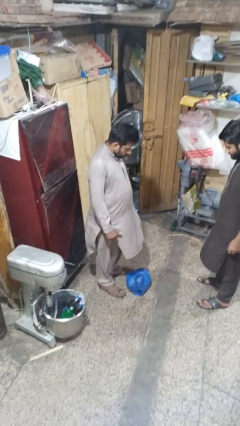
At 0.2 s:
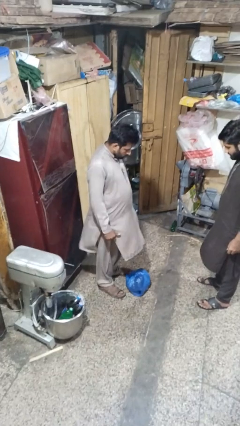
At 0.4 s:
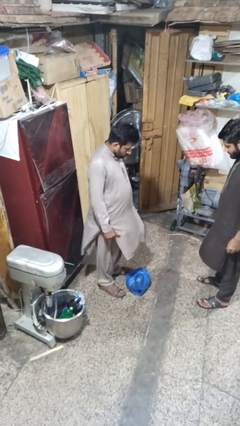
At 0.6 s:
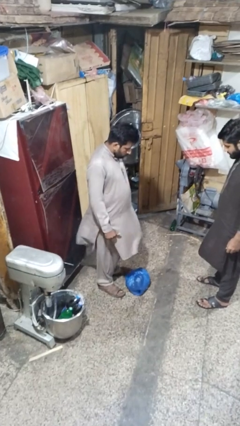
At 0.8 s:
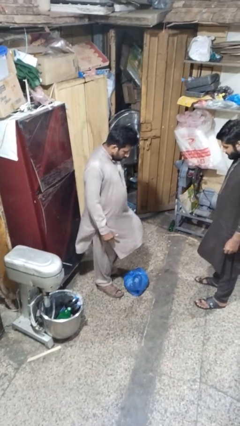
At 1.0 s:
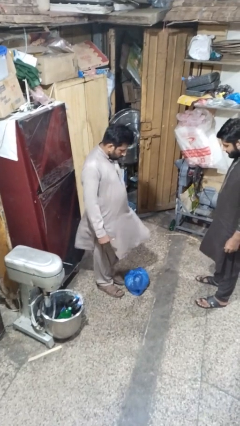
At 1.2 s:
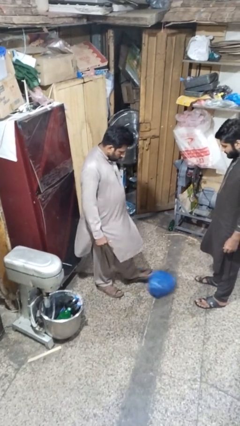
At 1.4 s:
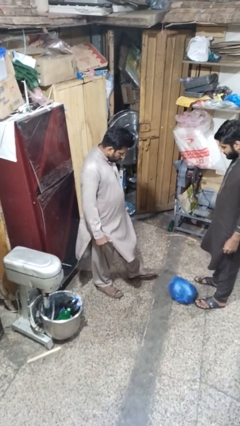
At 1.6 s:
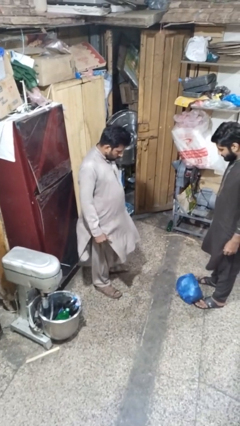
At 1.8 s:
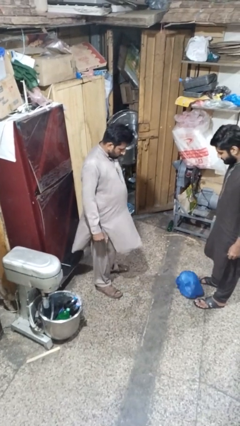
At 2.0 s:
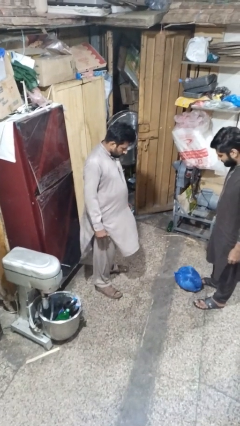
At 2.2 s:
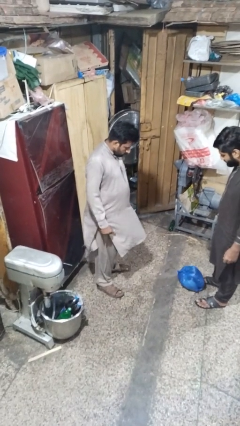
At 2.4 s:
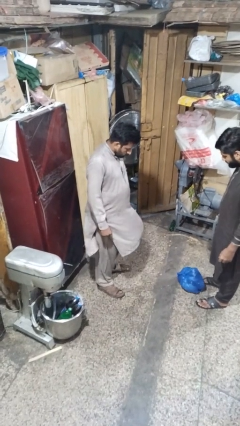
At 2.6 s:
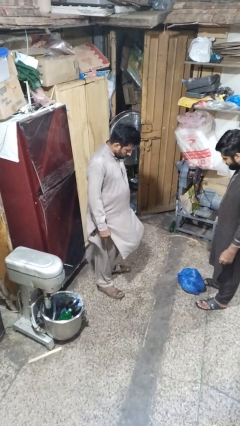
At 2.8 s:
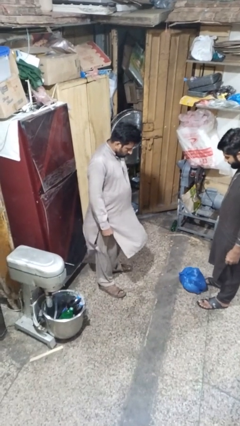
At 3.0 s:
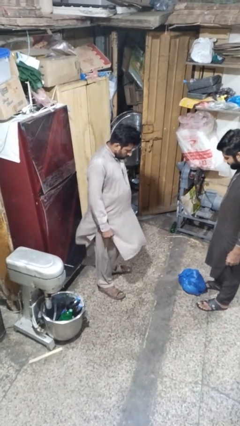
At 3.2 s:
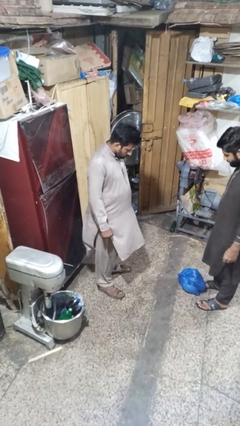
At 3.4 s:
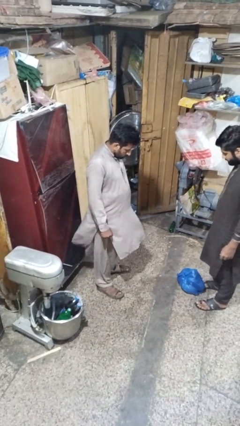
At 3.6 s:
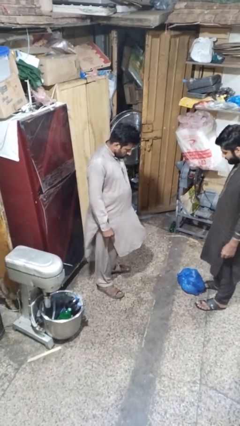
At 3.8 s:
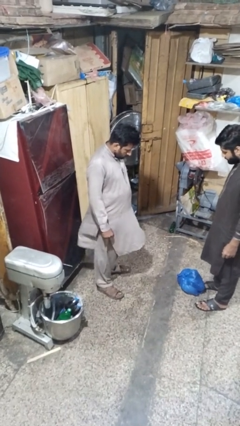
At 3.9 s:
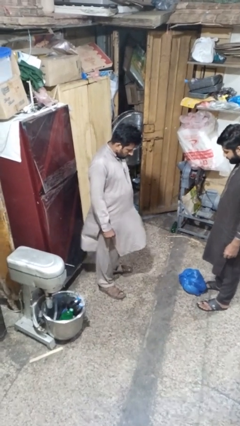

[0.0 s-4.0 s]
person kicks object to person

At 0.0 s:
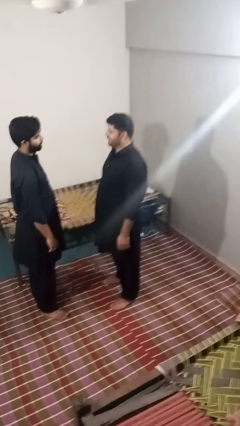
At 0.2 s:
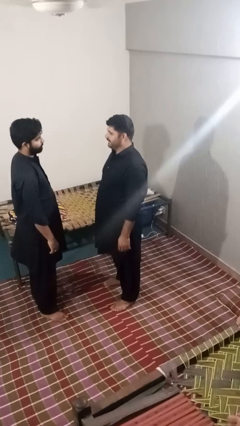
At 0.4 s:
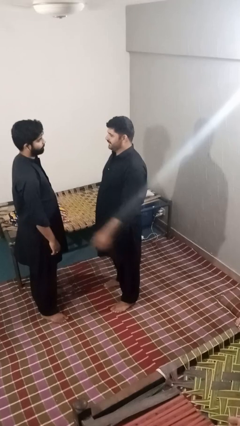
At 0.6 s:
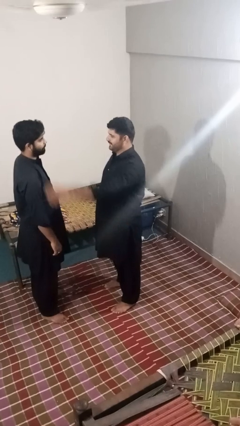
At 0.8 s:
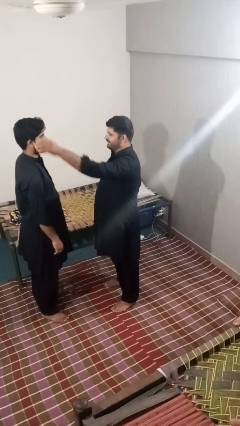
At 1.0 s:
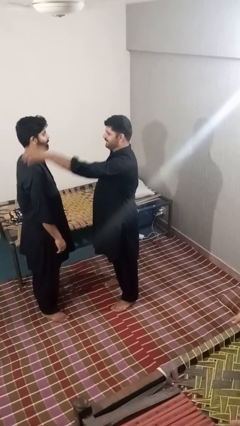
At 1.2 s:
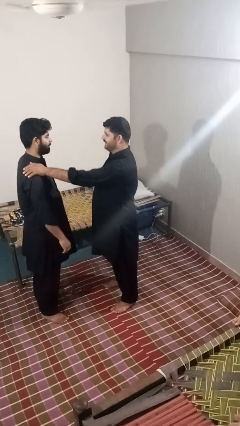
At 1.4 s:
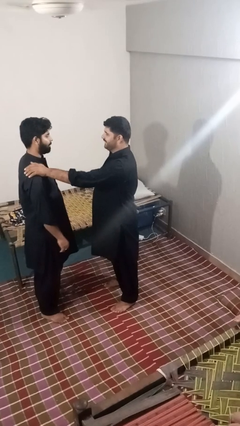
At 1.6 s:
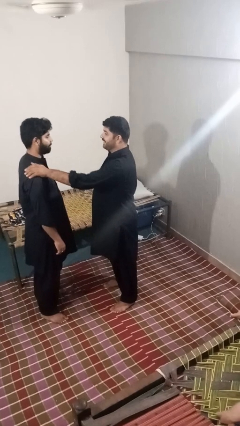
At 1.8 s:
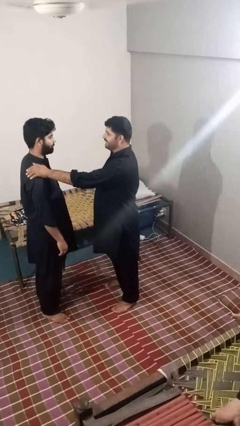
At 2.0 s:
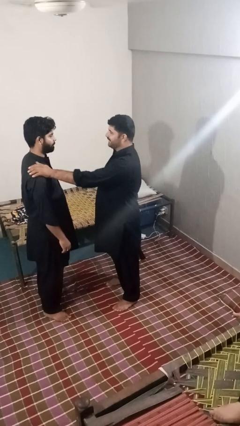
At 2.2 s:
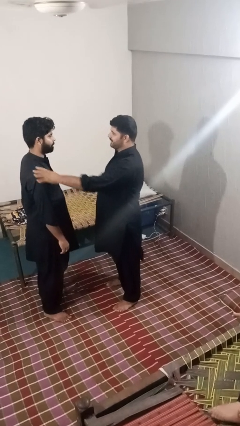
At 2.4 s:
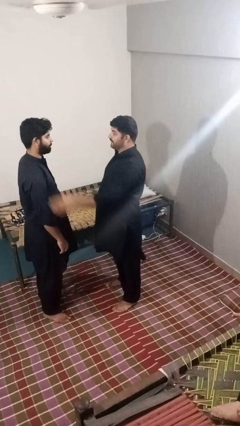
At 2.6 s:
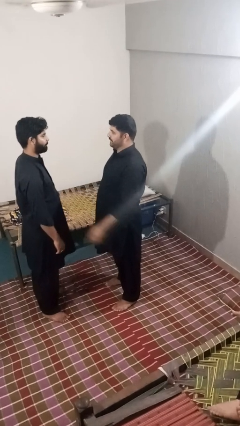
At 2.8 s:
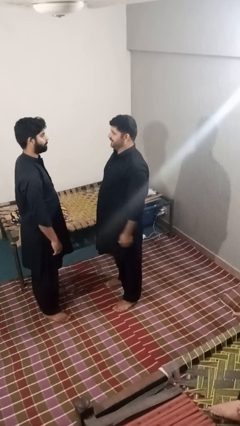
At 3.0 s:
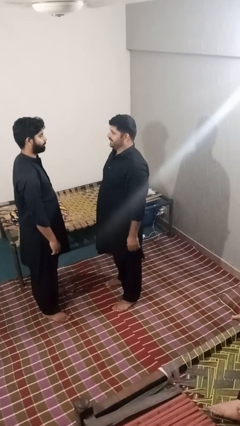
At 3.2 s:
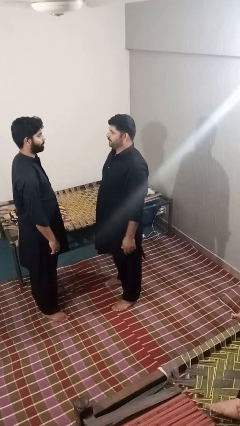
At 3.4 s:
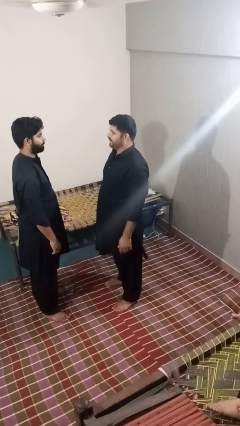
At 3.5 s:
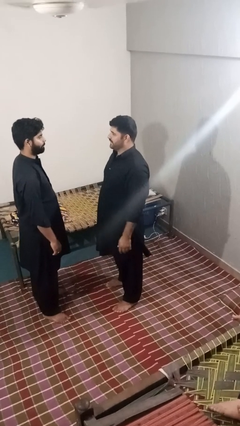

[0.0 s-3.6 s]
person pounds shoulders of person

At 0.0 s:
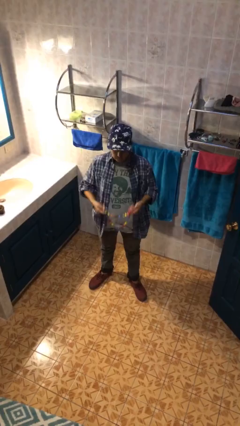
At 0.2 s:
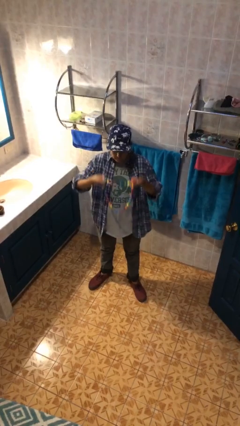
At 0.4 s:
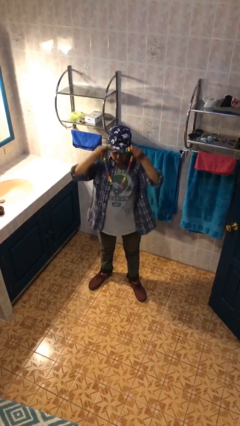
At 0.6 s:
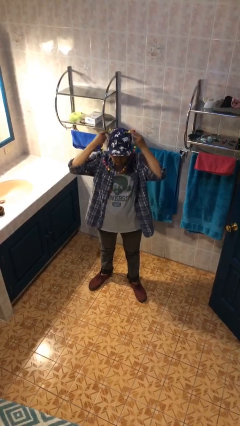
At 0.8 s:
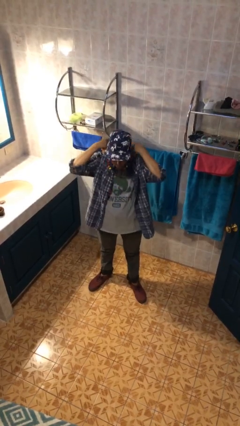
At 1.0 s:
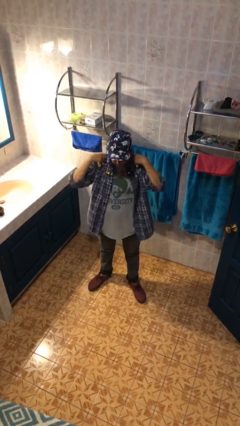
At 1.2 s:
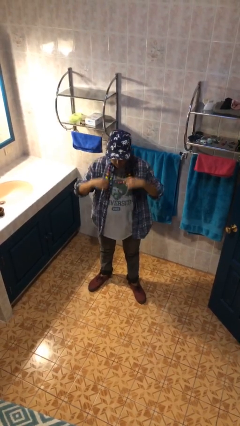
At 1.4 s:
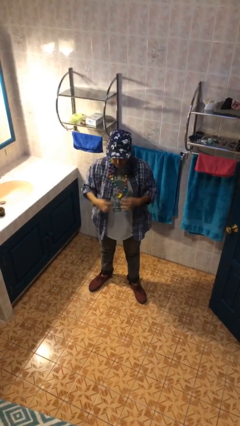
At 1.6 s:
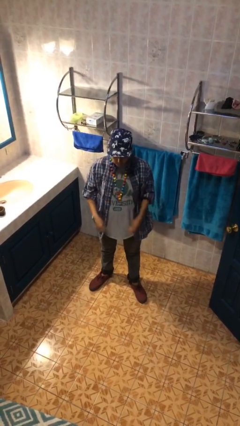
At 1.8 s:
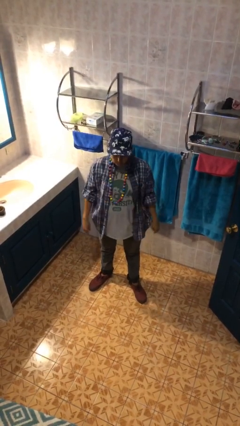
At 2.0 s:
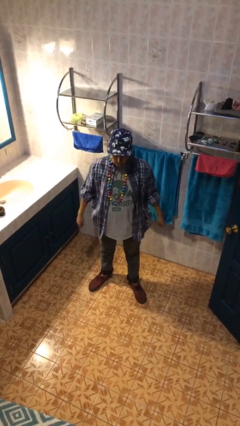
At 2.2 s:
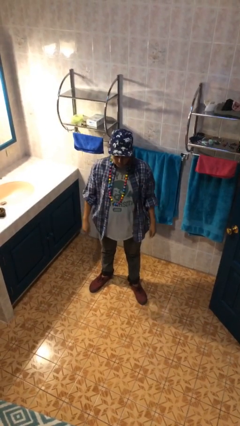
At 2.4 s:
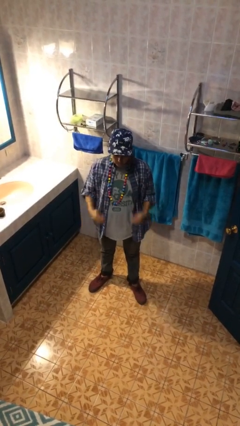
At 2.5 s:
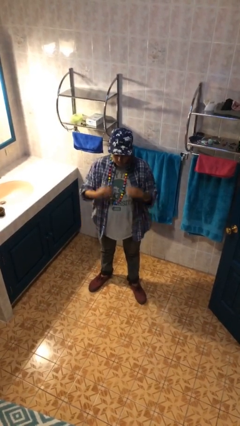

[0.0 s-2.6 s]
person puts on necklace

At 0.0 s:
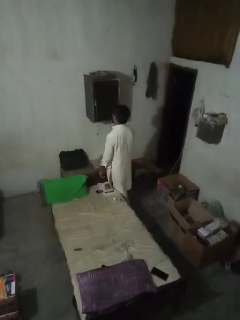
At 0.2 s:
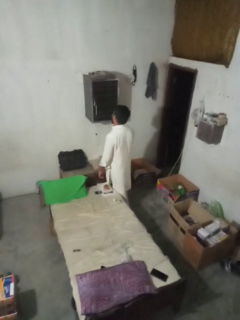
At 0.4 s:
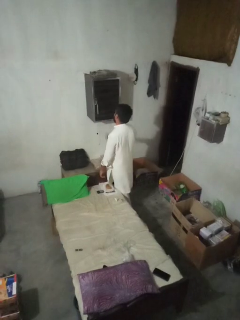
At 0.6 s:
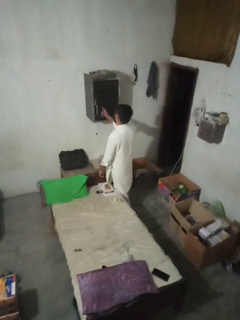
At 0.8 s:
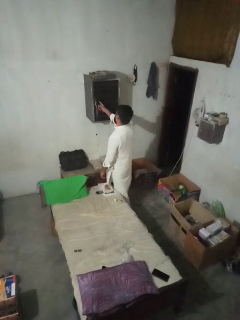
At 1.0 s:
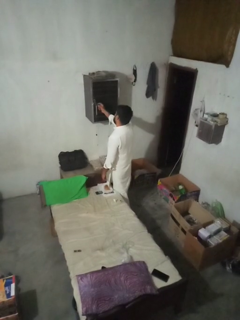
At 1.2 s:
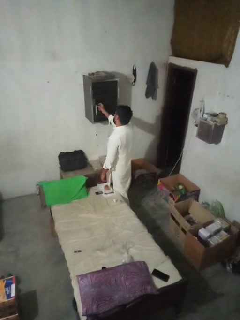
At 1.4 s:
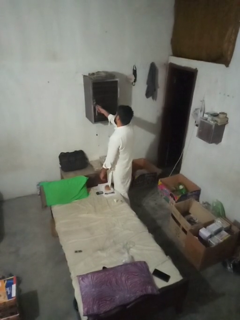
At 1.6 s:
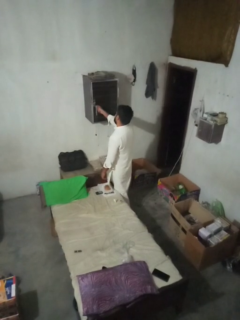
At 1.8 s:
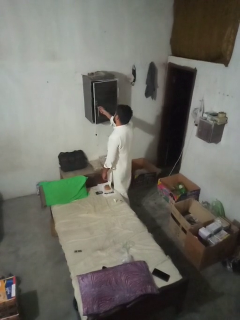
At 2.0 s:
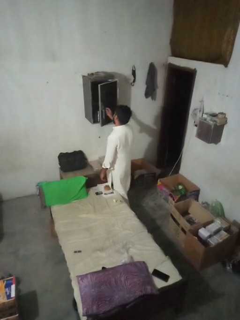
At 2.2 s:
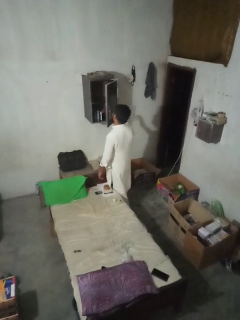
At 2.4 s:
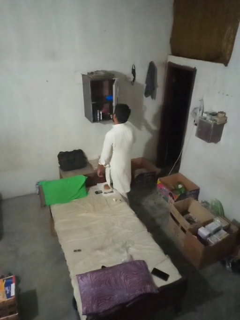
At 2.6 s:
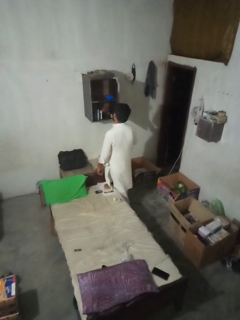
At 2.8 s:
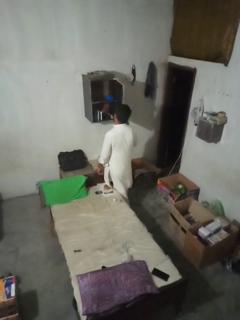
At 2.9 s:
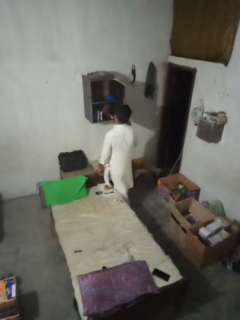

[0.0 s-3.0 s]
person opens dresser drawer

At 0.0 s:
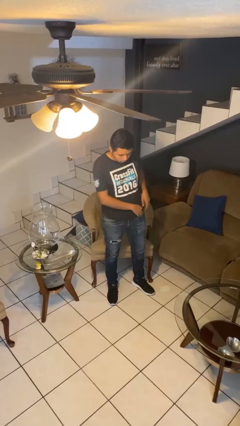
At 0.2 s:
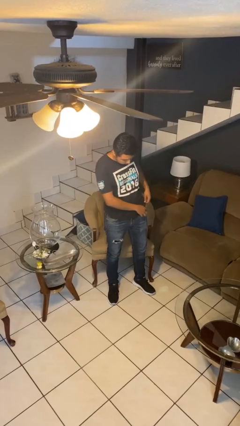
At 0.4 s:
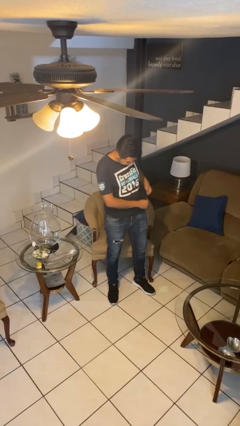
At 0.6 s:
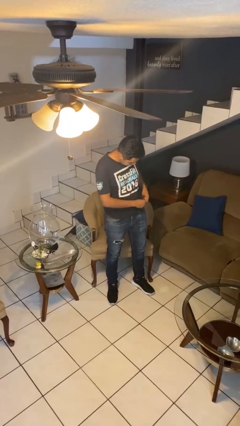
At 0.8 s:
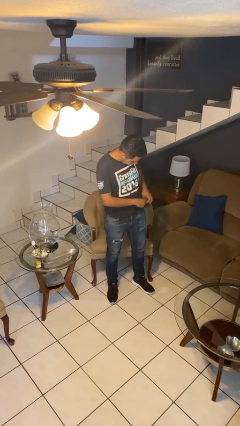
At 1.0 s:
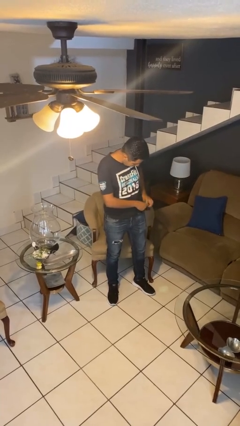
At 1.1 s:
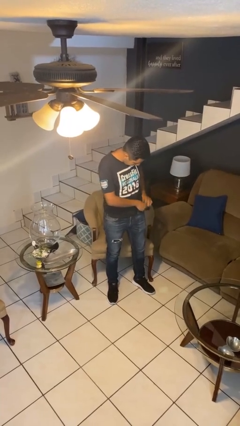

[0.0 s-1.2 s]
person tucks in shirt

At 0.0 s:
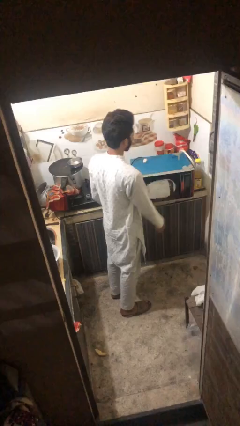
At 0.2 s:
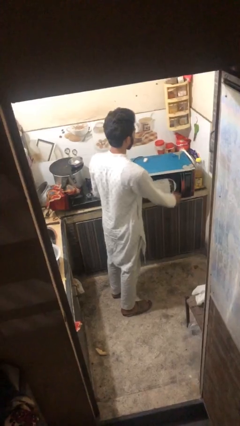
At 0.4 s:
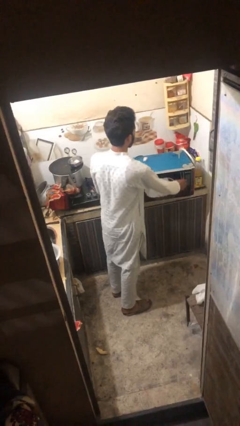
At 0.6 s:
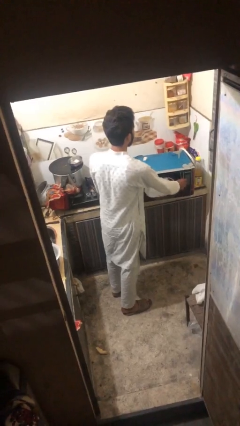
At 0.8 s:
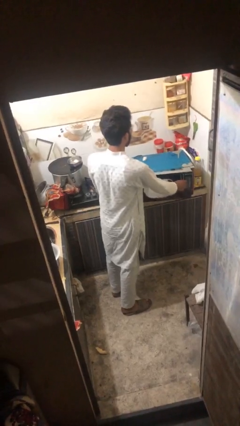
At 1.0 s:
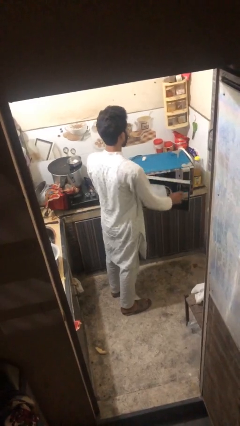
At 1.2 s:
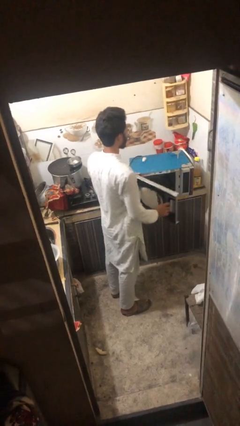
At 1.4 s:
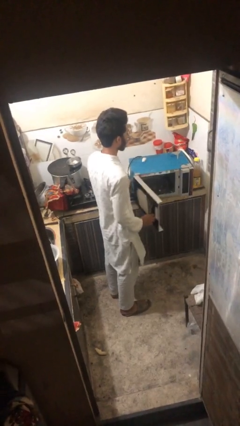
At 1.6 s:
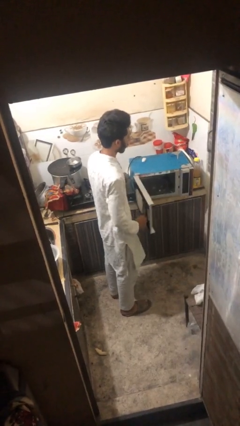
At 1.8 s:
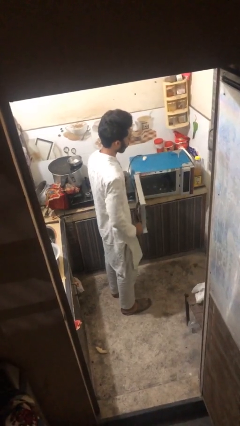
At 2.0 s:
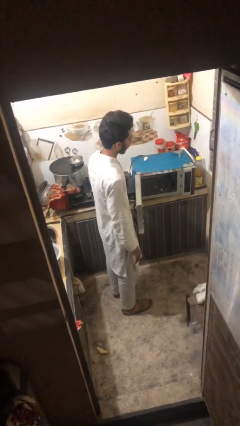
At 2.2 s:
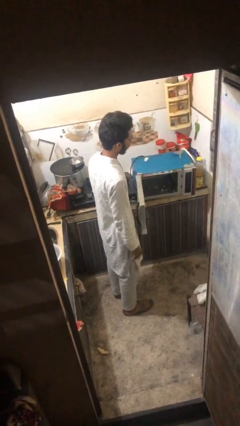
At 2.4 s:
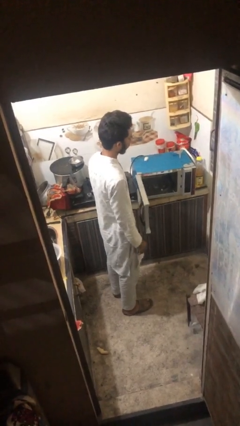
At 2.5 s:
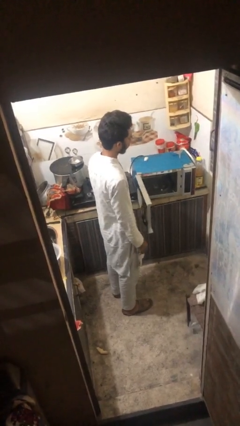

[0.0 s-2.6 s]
person opens oven door

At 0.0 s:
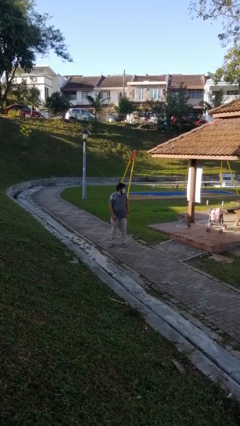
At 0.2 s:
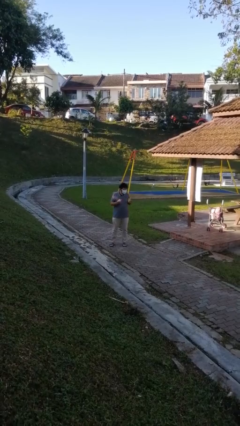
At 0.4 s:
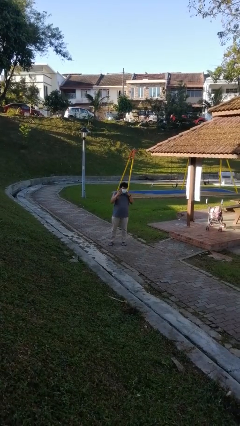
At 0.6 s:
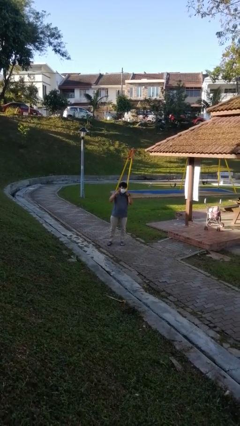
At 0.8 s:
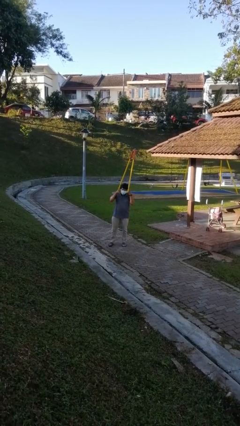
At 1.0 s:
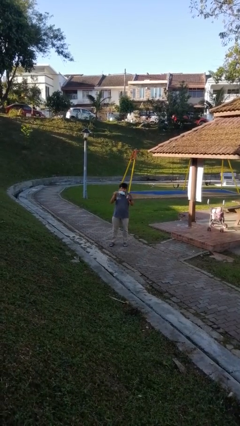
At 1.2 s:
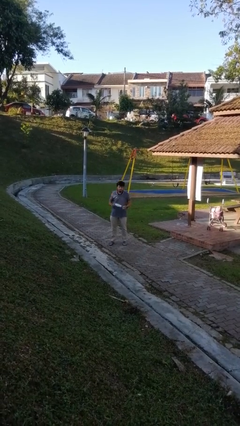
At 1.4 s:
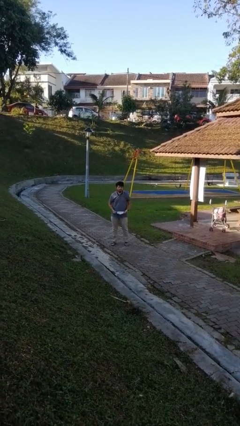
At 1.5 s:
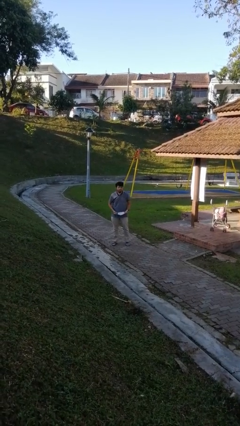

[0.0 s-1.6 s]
person takes off facemask
